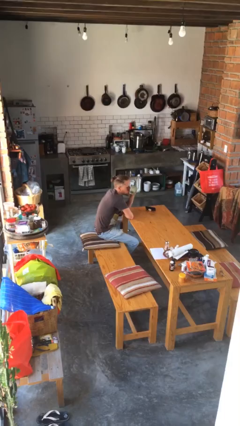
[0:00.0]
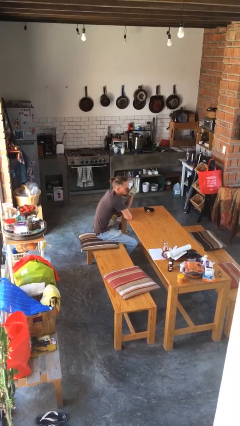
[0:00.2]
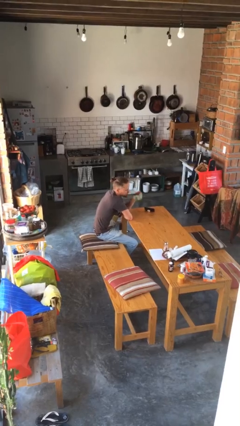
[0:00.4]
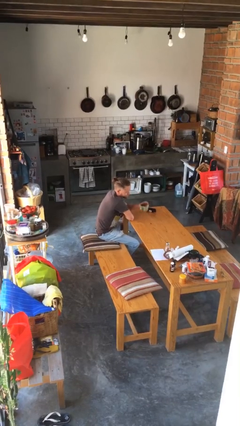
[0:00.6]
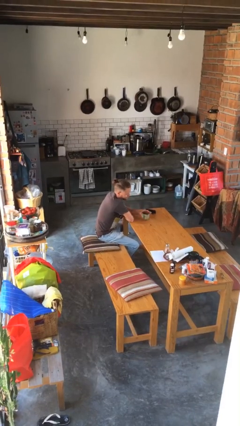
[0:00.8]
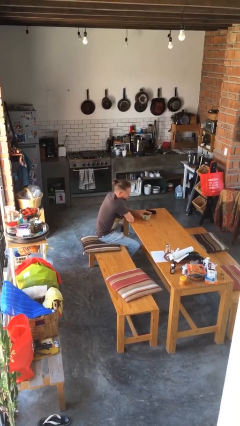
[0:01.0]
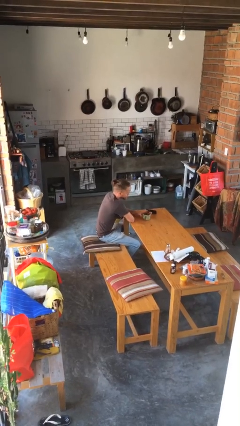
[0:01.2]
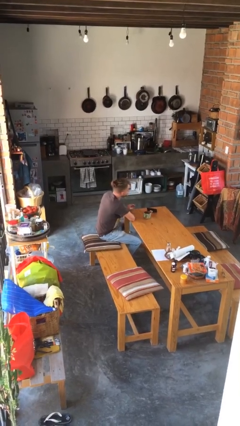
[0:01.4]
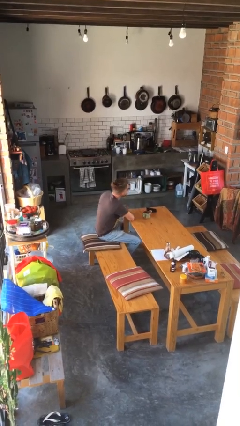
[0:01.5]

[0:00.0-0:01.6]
person puts down object on table

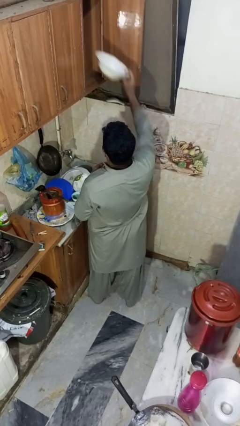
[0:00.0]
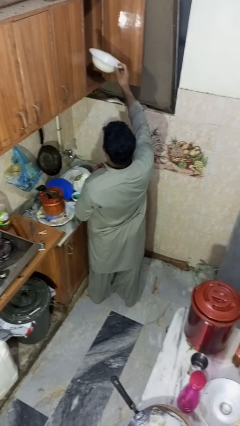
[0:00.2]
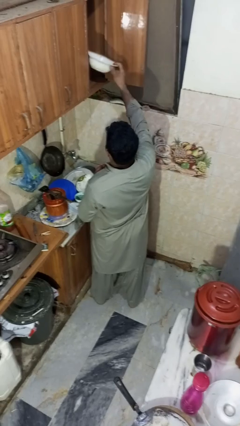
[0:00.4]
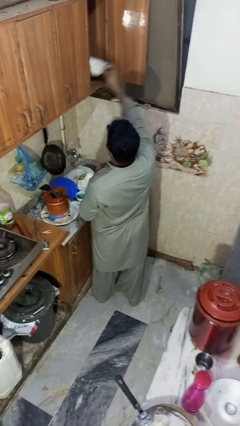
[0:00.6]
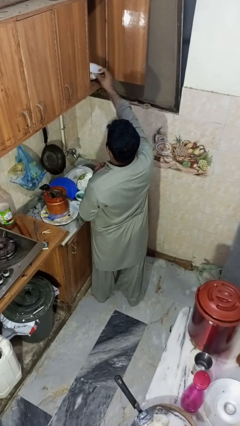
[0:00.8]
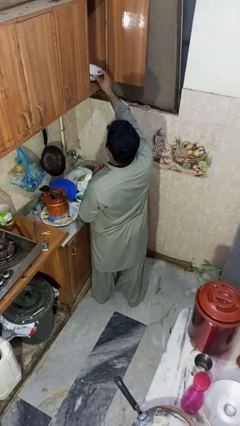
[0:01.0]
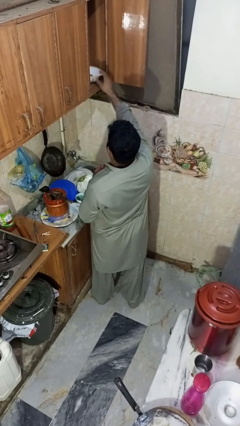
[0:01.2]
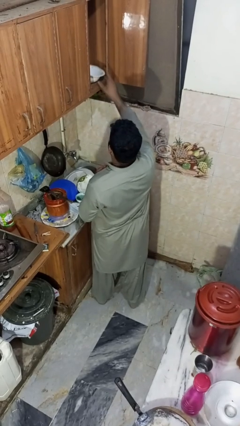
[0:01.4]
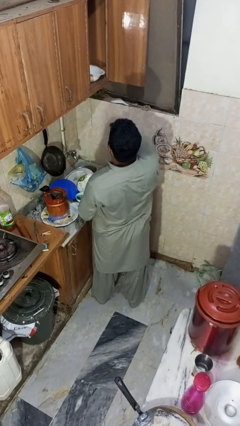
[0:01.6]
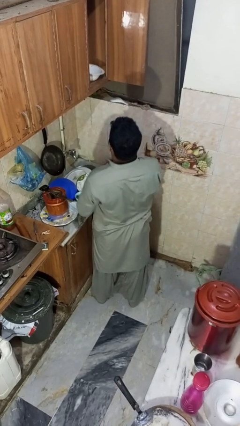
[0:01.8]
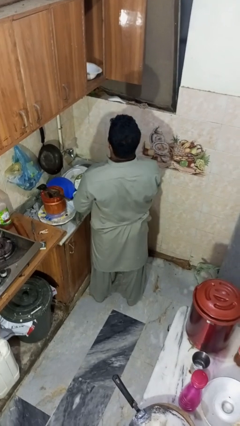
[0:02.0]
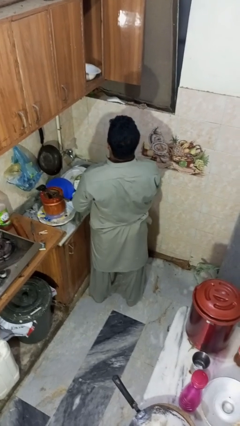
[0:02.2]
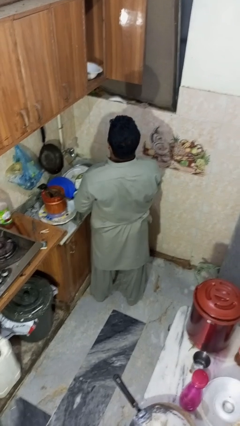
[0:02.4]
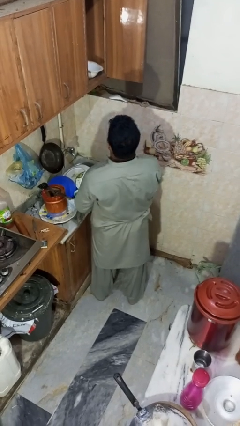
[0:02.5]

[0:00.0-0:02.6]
person puts object in cabinet

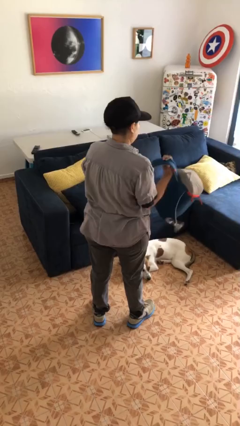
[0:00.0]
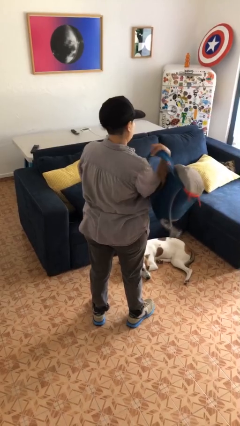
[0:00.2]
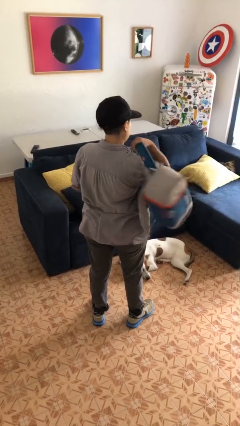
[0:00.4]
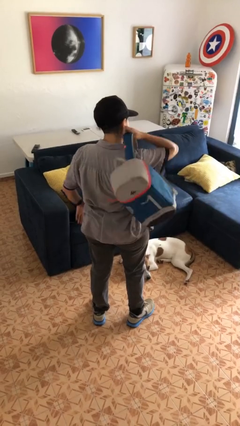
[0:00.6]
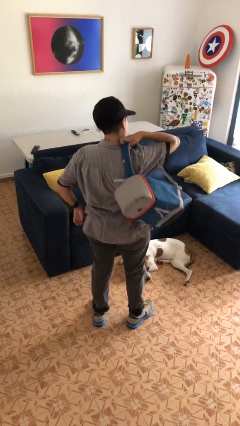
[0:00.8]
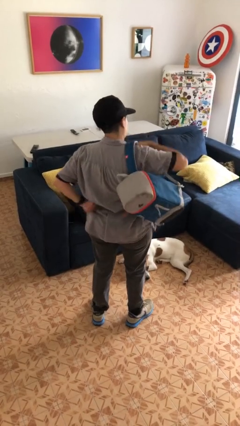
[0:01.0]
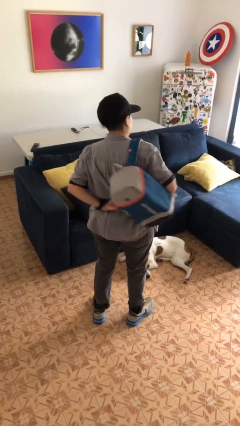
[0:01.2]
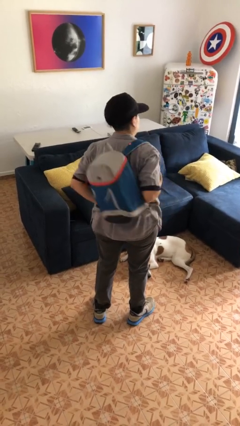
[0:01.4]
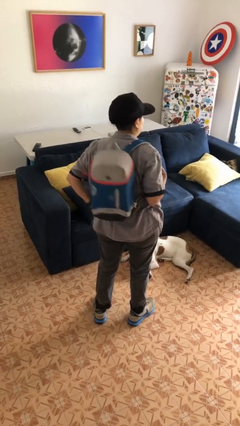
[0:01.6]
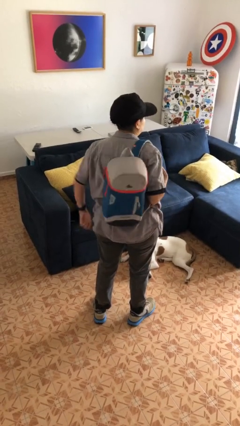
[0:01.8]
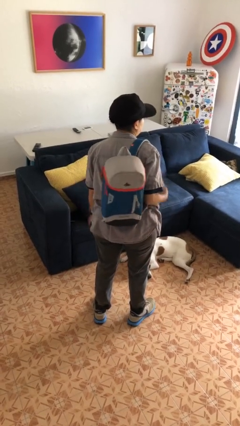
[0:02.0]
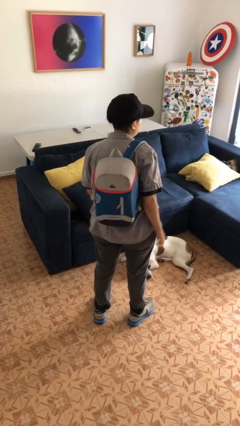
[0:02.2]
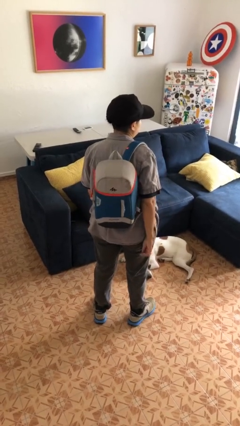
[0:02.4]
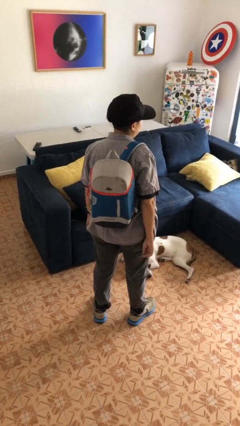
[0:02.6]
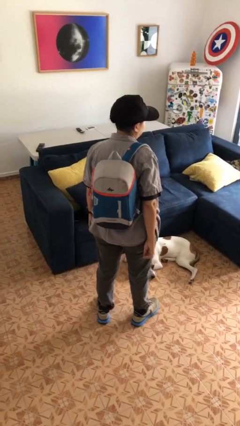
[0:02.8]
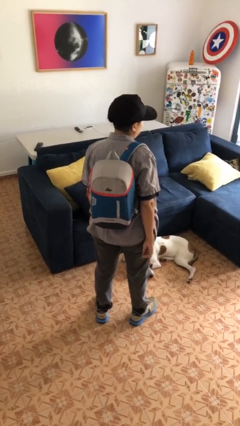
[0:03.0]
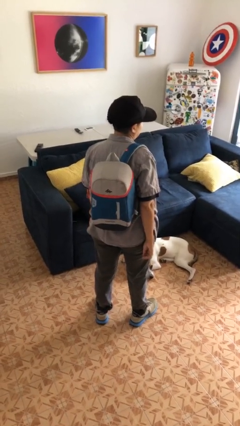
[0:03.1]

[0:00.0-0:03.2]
person puts on backpack

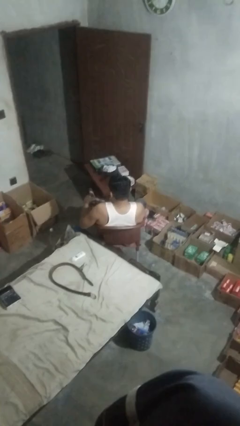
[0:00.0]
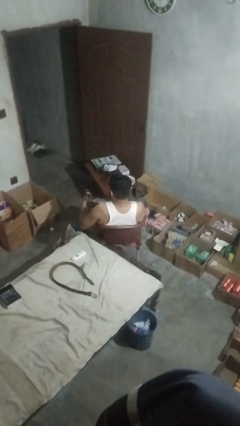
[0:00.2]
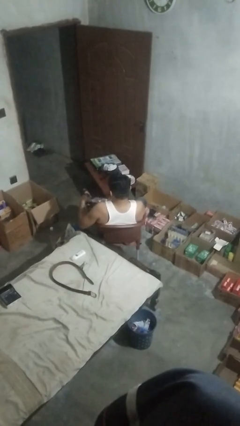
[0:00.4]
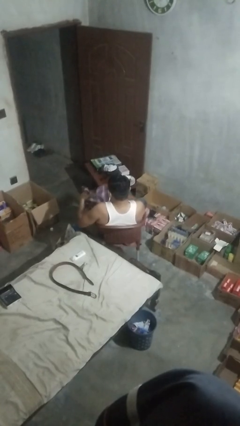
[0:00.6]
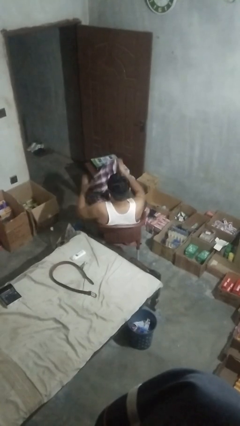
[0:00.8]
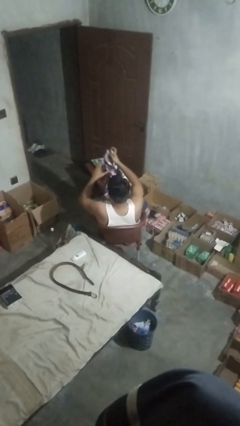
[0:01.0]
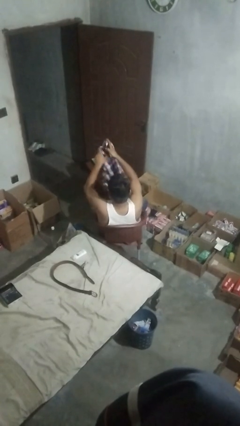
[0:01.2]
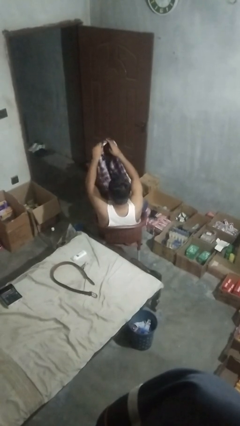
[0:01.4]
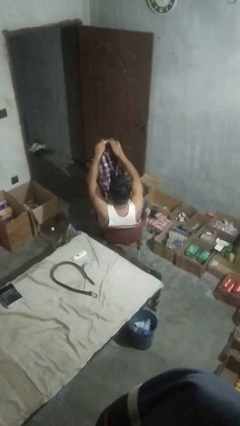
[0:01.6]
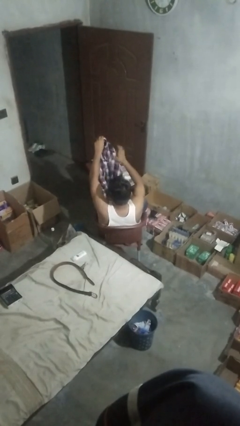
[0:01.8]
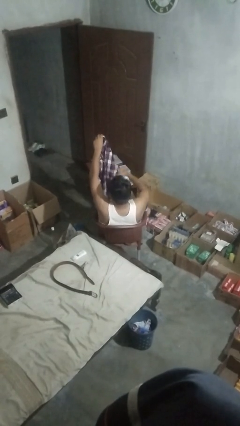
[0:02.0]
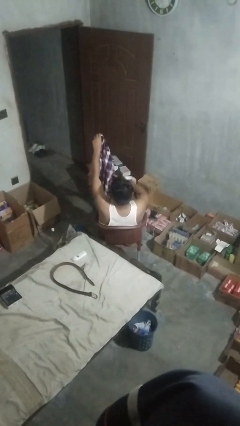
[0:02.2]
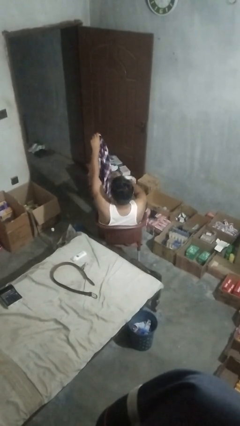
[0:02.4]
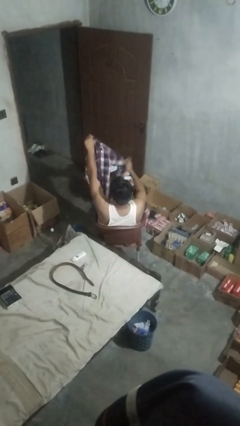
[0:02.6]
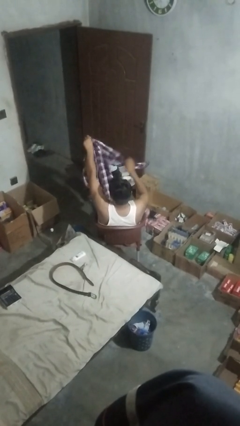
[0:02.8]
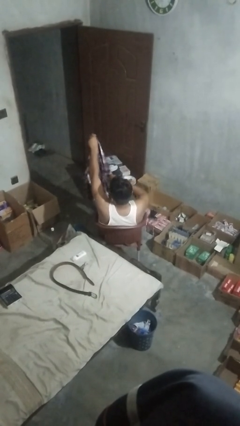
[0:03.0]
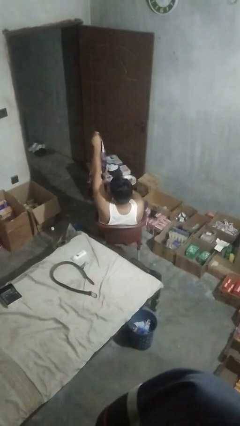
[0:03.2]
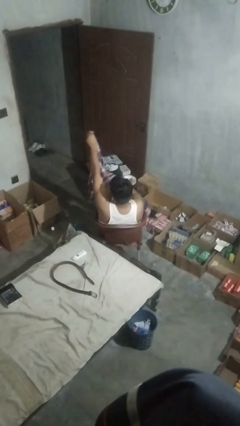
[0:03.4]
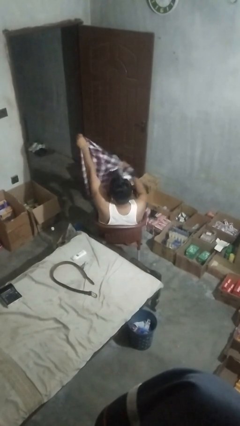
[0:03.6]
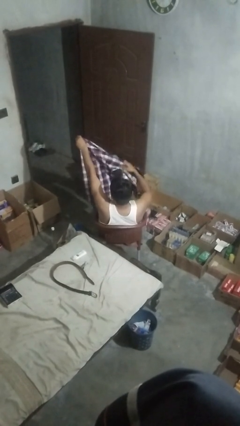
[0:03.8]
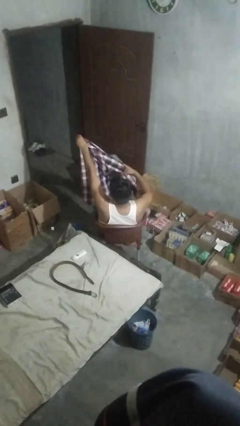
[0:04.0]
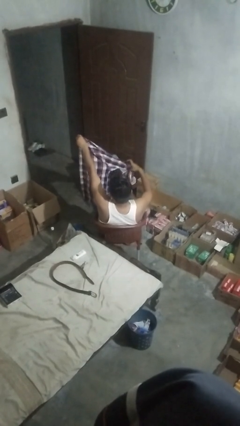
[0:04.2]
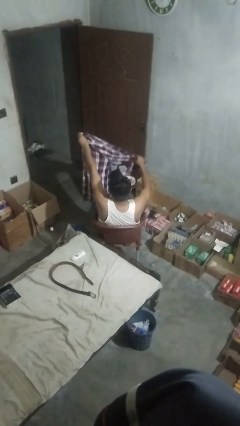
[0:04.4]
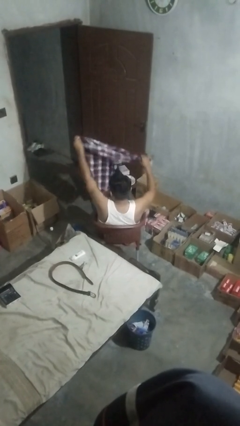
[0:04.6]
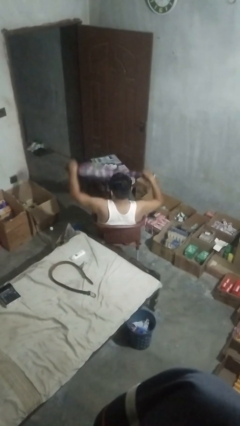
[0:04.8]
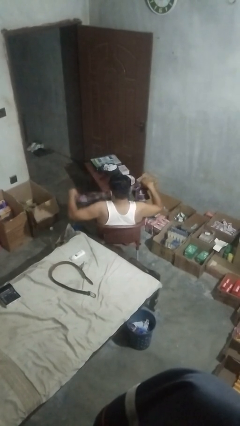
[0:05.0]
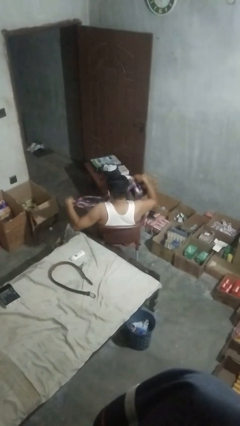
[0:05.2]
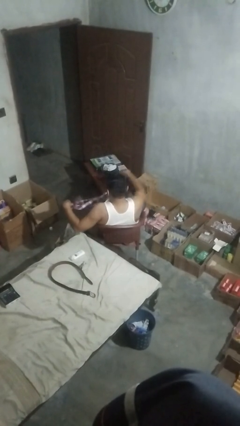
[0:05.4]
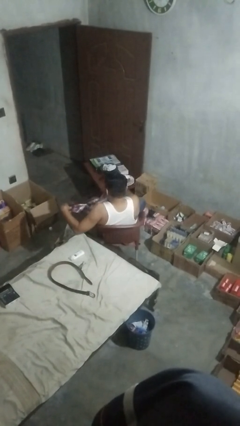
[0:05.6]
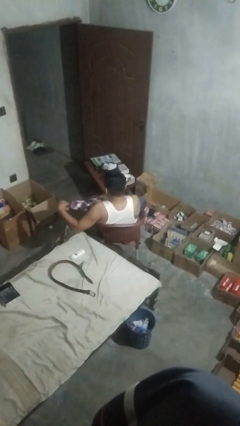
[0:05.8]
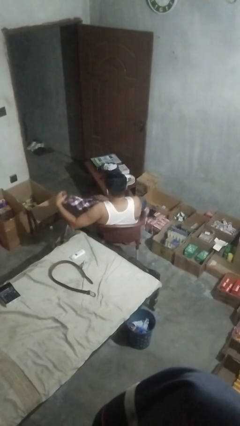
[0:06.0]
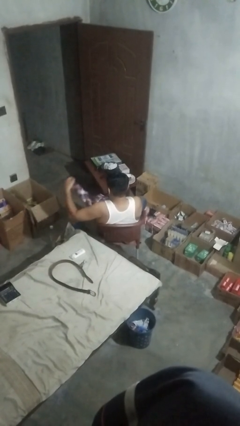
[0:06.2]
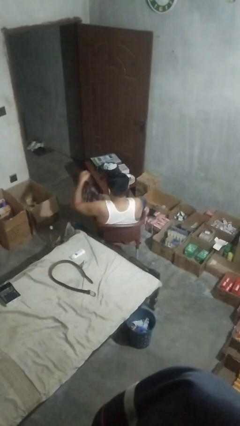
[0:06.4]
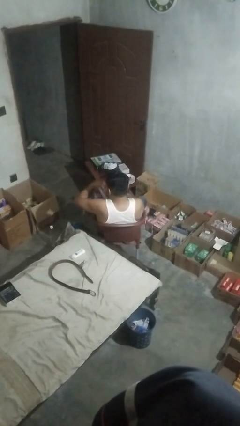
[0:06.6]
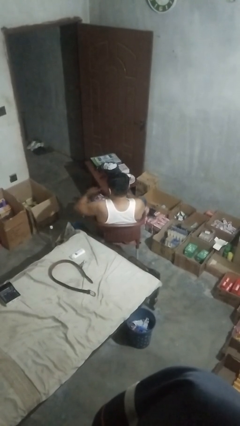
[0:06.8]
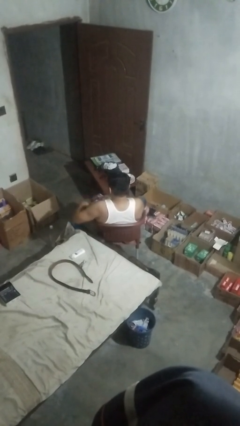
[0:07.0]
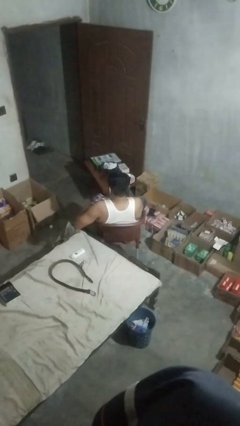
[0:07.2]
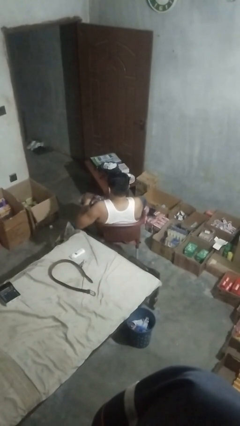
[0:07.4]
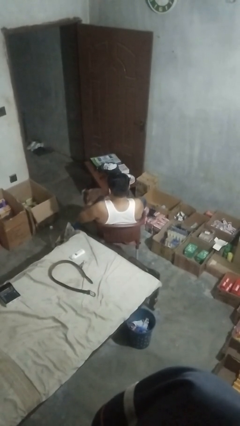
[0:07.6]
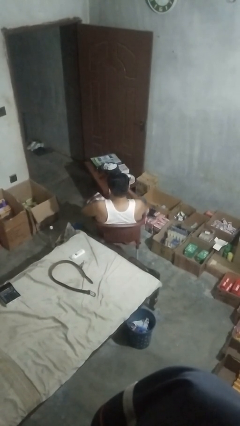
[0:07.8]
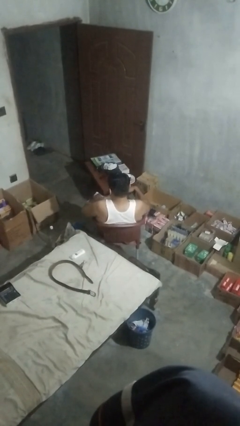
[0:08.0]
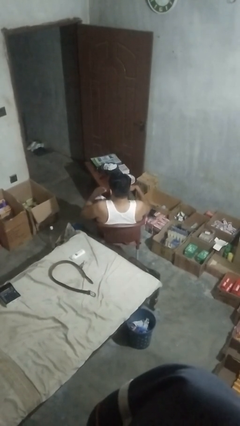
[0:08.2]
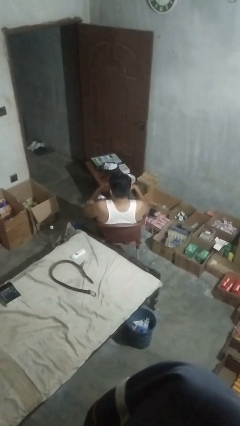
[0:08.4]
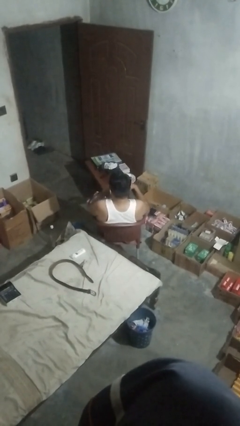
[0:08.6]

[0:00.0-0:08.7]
person folds shirt

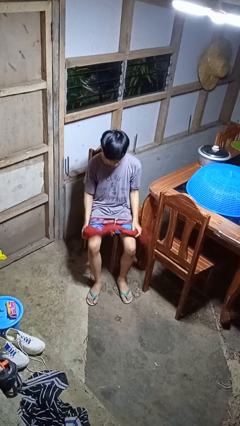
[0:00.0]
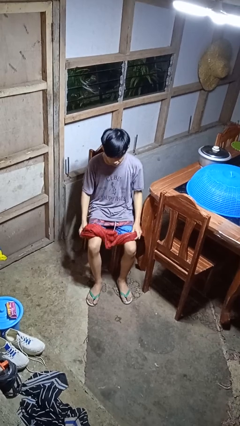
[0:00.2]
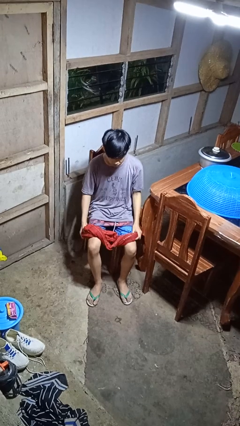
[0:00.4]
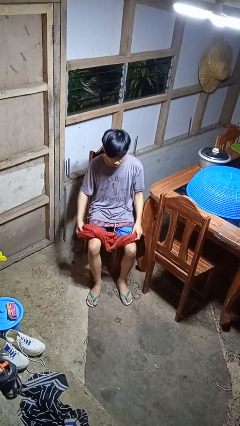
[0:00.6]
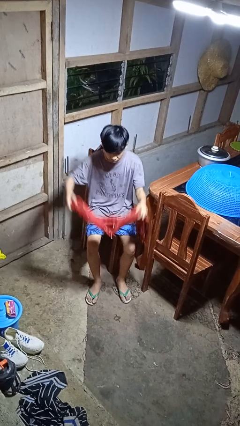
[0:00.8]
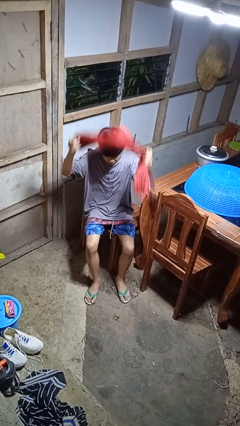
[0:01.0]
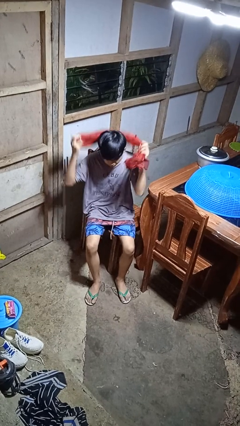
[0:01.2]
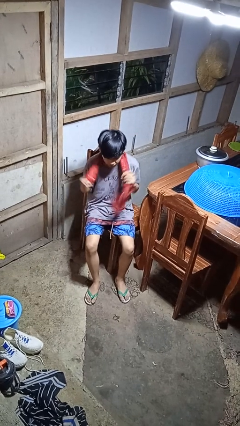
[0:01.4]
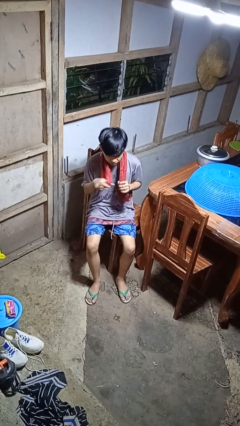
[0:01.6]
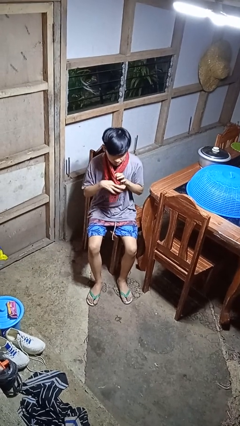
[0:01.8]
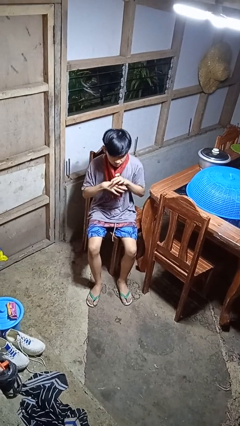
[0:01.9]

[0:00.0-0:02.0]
person puts on scarf
